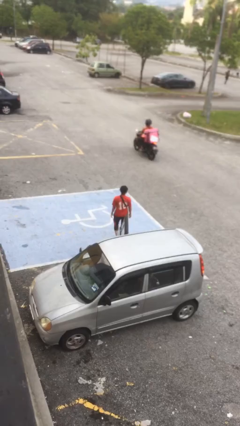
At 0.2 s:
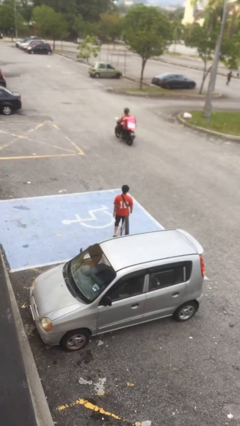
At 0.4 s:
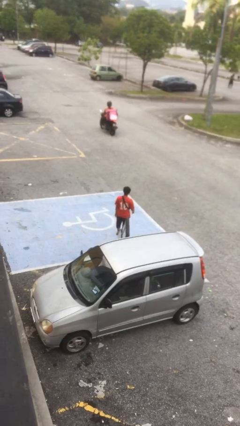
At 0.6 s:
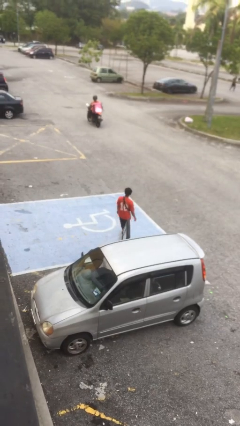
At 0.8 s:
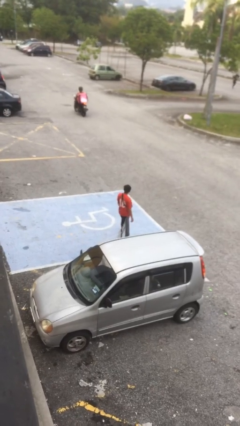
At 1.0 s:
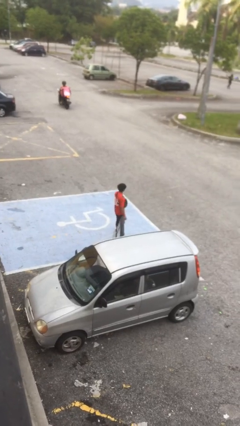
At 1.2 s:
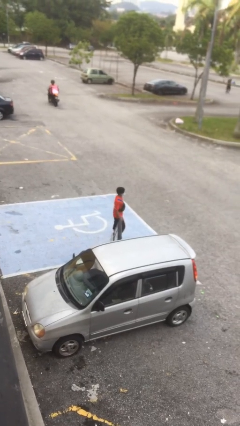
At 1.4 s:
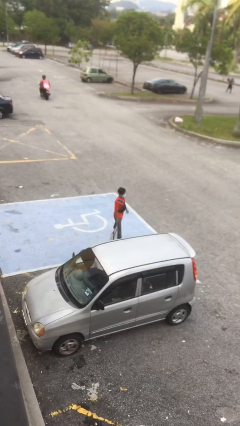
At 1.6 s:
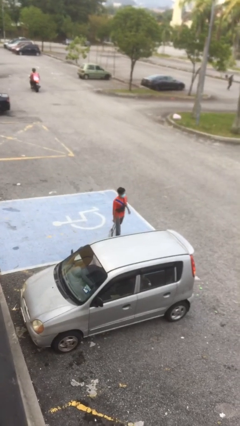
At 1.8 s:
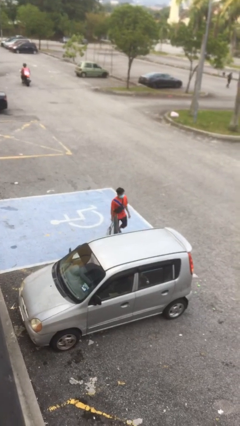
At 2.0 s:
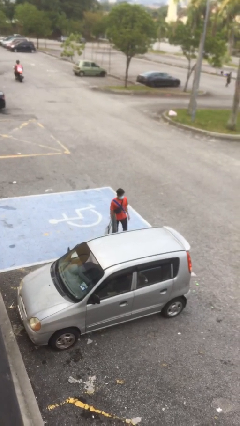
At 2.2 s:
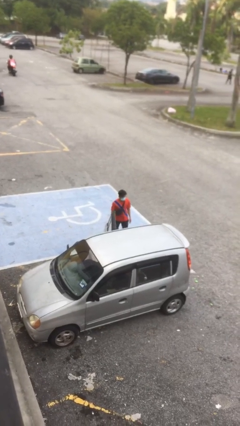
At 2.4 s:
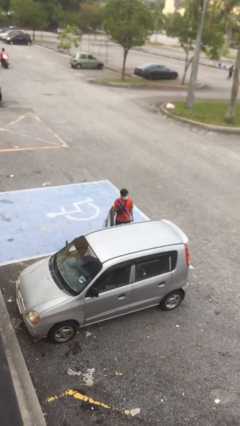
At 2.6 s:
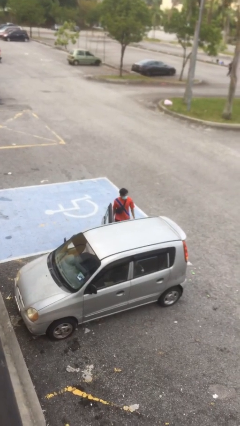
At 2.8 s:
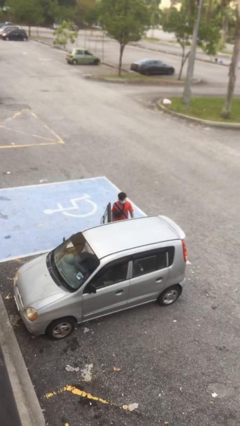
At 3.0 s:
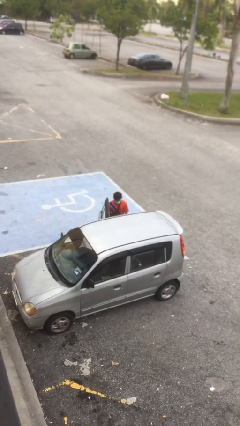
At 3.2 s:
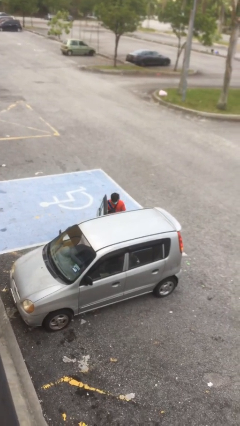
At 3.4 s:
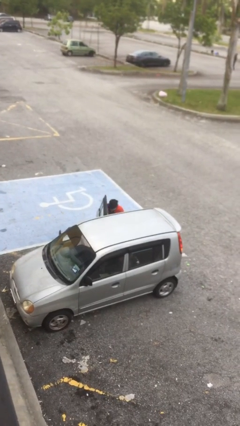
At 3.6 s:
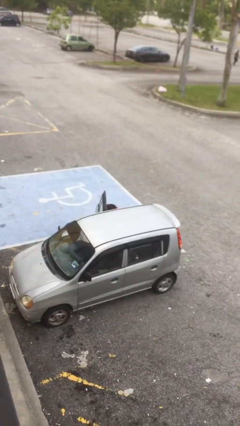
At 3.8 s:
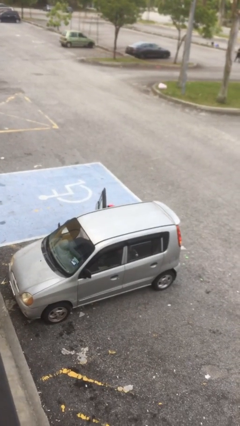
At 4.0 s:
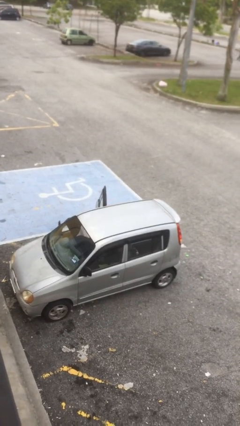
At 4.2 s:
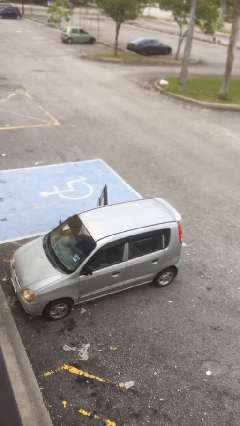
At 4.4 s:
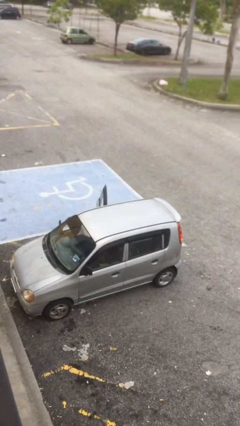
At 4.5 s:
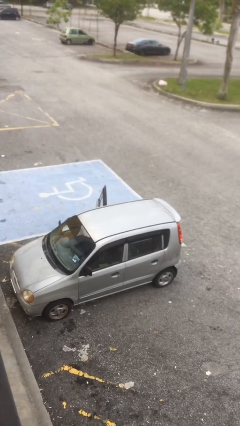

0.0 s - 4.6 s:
person enters car

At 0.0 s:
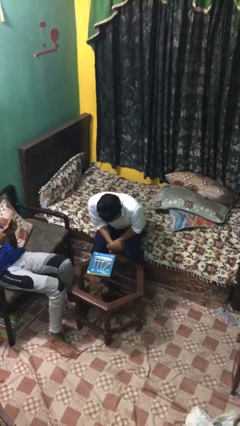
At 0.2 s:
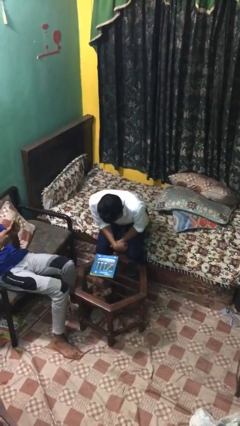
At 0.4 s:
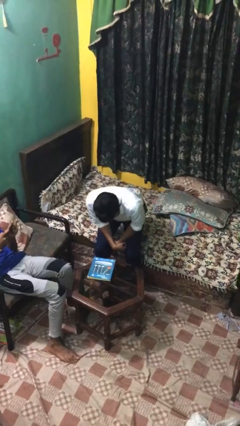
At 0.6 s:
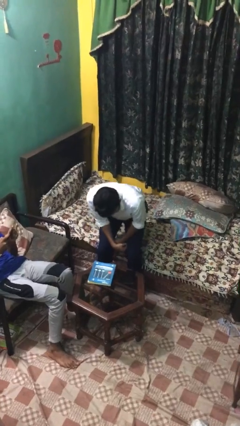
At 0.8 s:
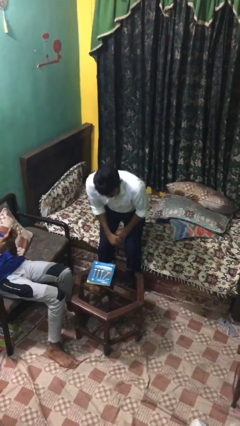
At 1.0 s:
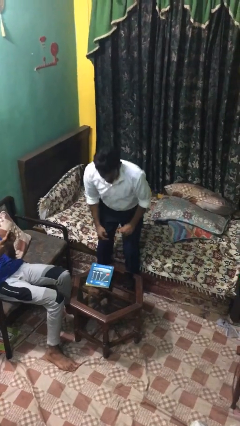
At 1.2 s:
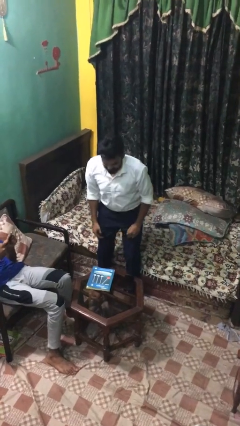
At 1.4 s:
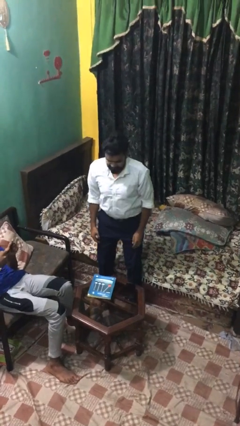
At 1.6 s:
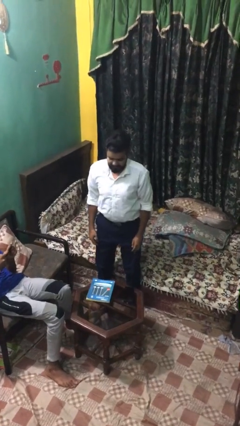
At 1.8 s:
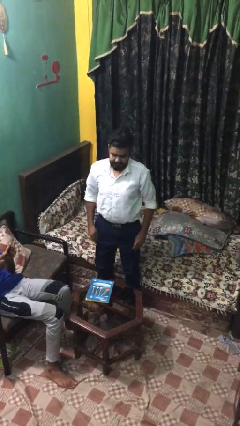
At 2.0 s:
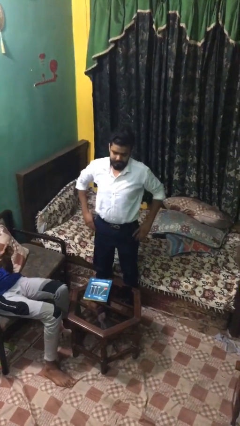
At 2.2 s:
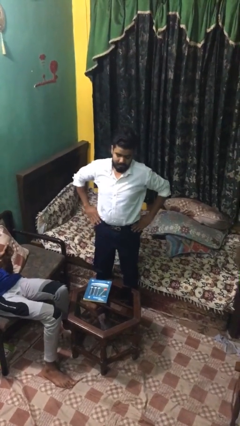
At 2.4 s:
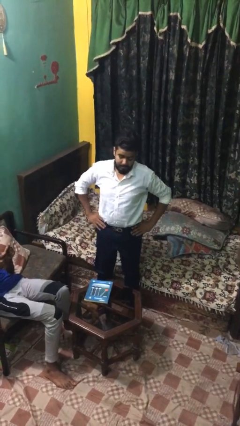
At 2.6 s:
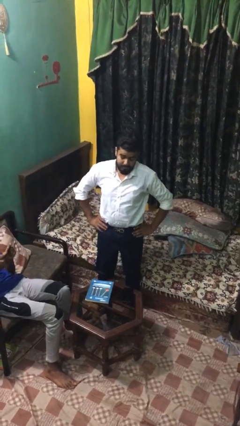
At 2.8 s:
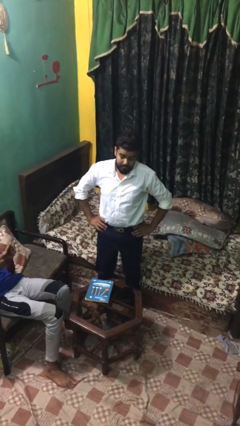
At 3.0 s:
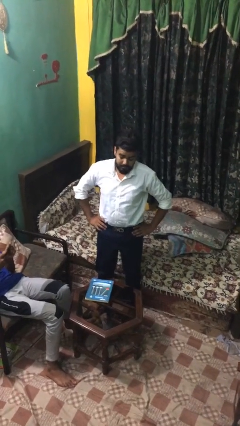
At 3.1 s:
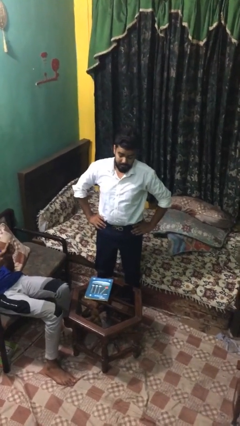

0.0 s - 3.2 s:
person stands up

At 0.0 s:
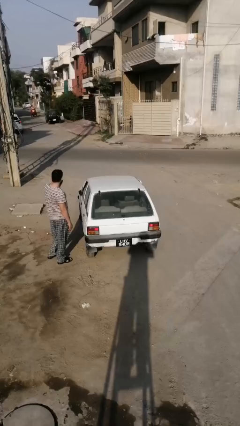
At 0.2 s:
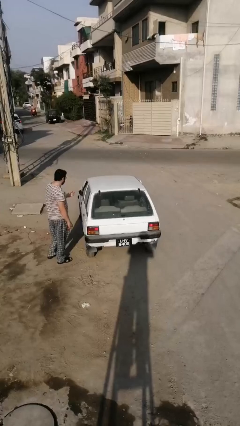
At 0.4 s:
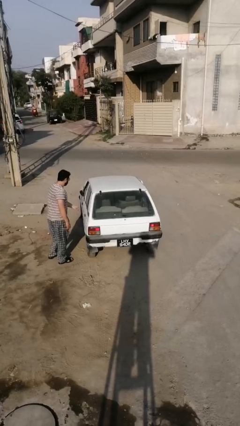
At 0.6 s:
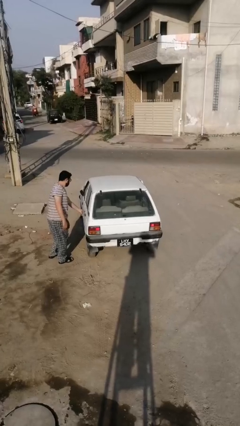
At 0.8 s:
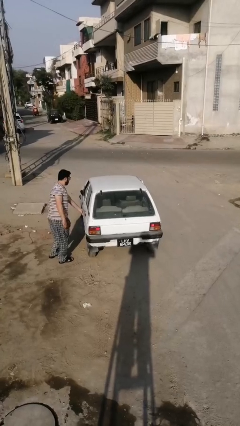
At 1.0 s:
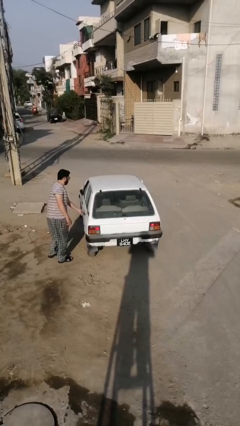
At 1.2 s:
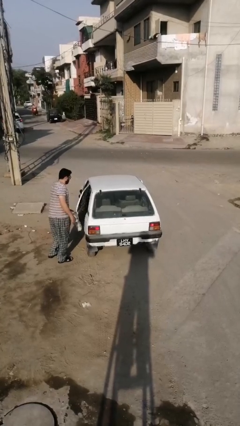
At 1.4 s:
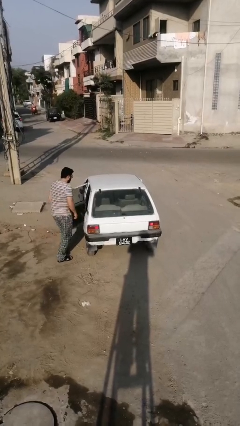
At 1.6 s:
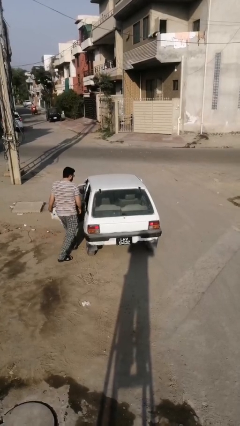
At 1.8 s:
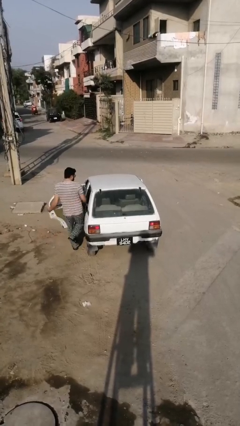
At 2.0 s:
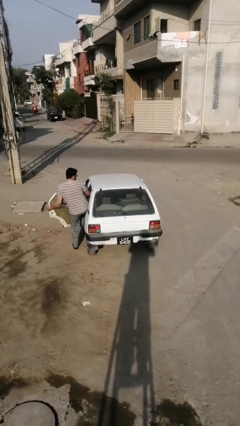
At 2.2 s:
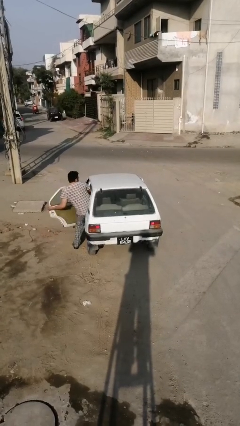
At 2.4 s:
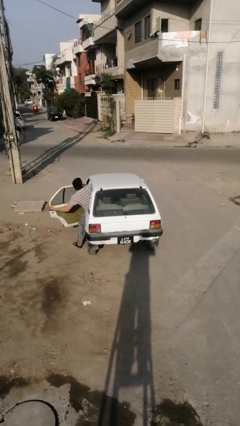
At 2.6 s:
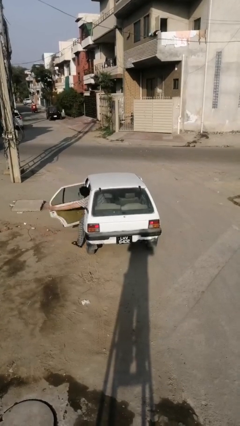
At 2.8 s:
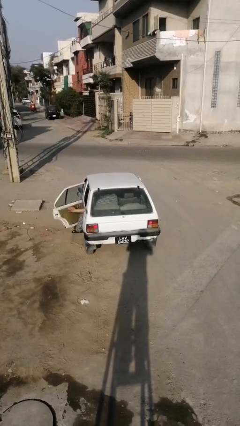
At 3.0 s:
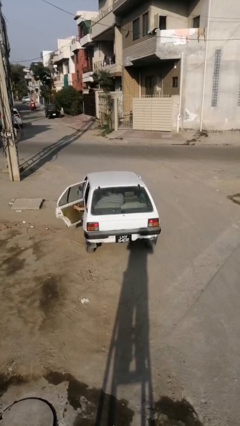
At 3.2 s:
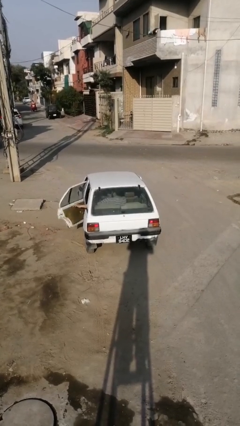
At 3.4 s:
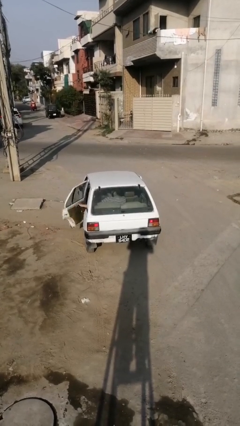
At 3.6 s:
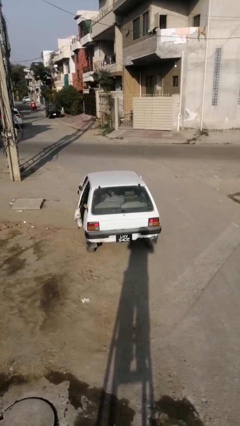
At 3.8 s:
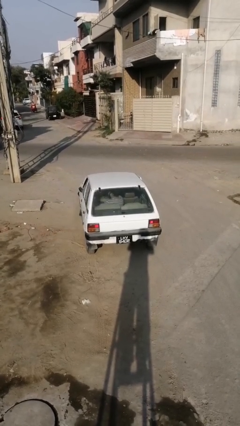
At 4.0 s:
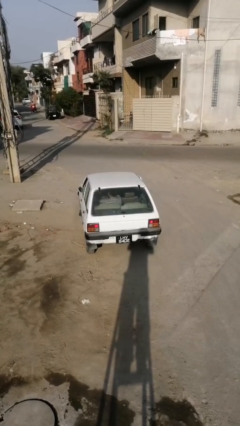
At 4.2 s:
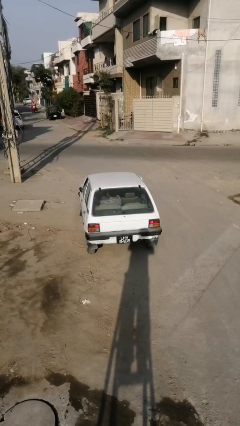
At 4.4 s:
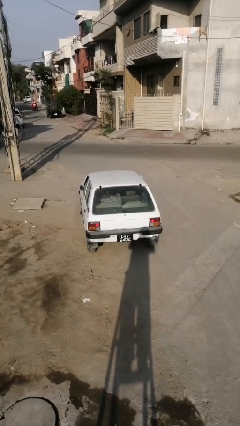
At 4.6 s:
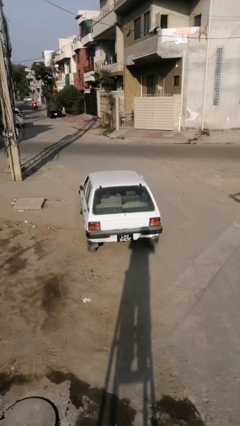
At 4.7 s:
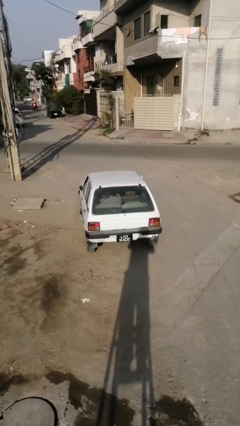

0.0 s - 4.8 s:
car picks up person

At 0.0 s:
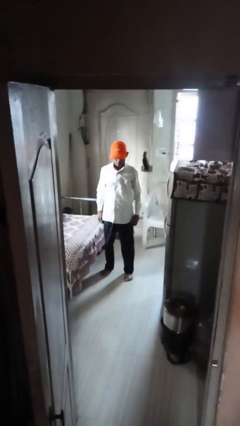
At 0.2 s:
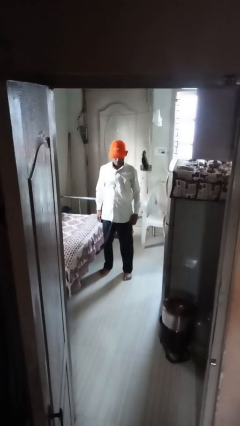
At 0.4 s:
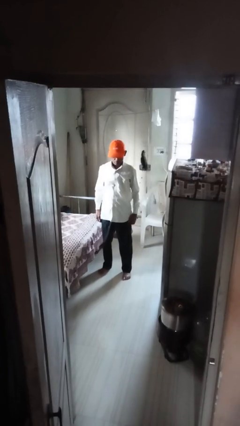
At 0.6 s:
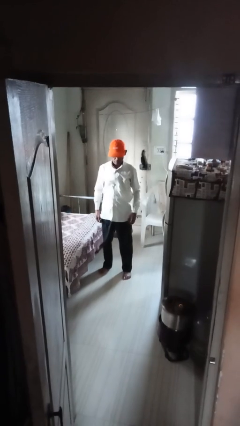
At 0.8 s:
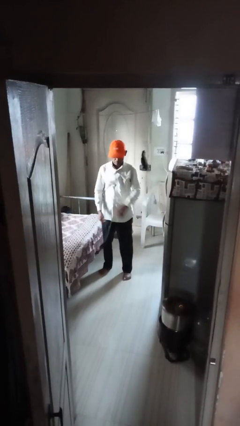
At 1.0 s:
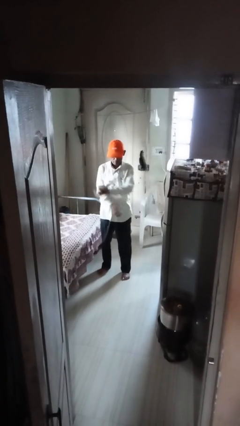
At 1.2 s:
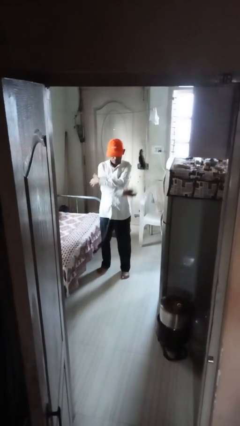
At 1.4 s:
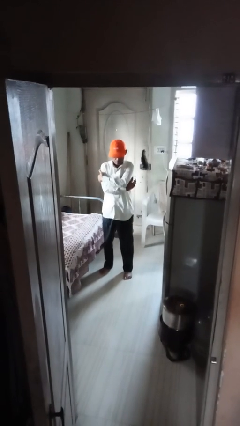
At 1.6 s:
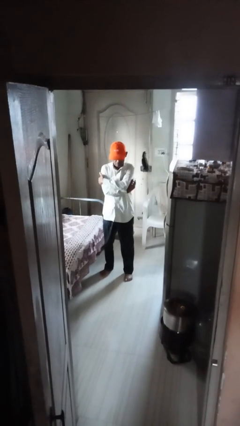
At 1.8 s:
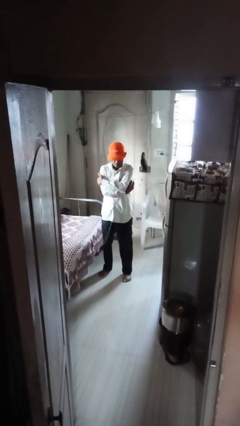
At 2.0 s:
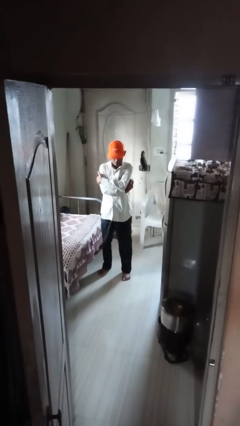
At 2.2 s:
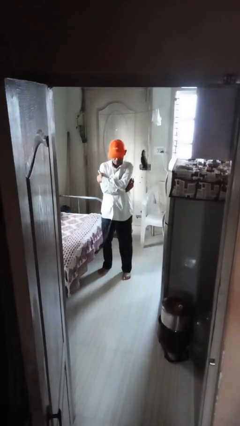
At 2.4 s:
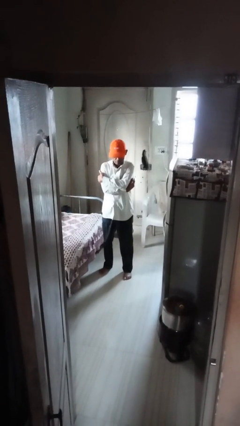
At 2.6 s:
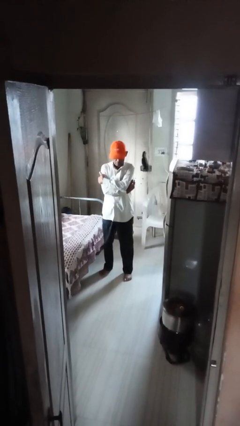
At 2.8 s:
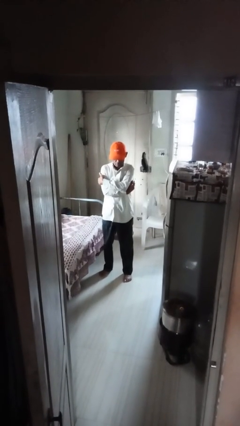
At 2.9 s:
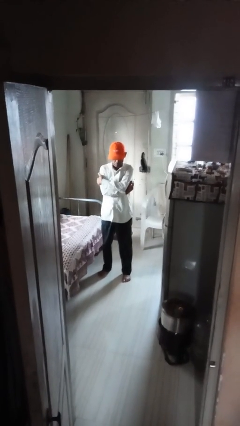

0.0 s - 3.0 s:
person crosses arms

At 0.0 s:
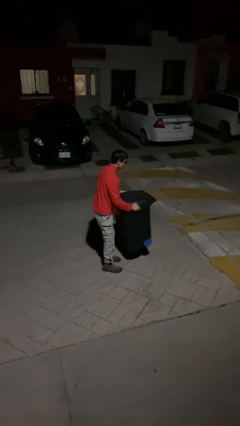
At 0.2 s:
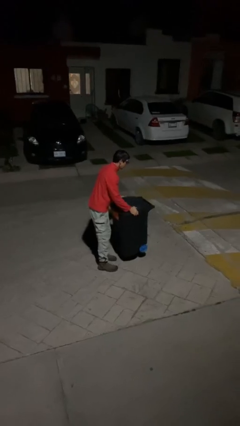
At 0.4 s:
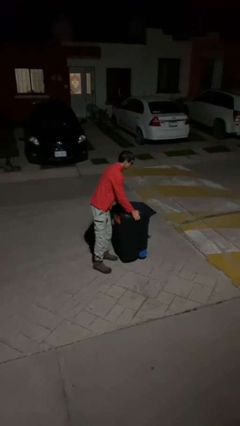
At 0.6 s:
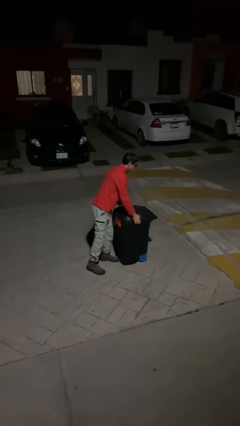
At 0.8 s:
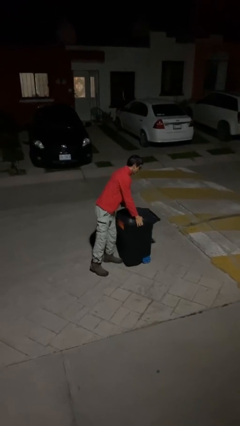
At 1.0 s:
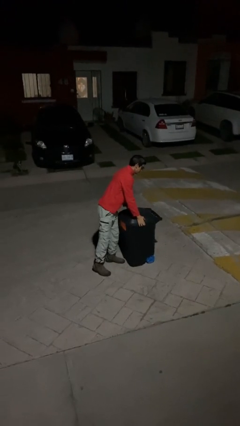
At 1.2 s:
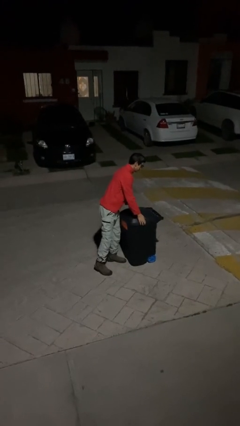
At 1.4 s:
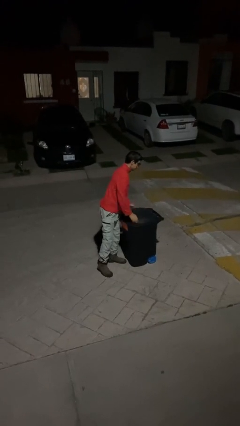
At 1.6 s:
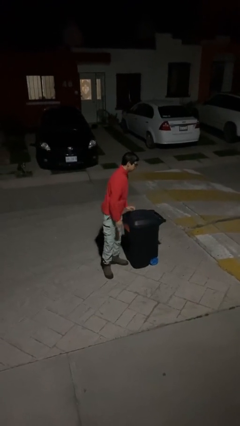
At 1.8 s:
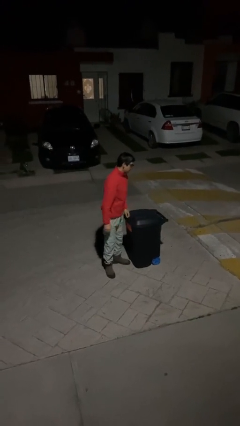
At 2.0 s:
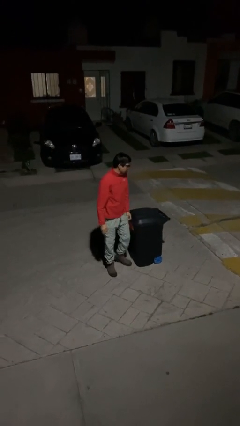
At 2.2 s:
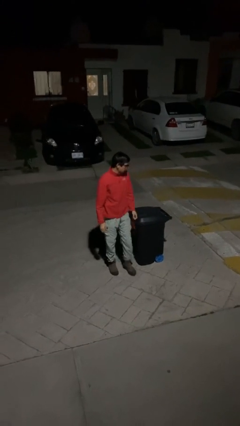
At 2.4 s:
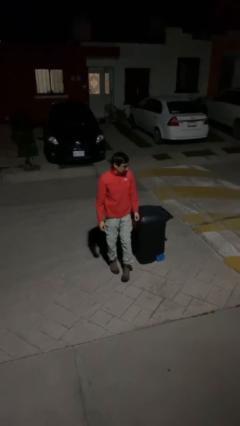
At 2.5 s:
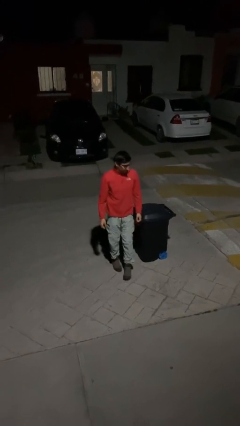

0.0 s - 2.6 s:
person puts down object on floor
